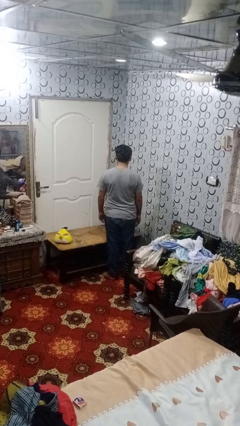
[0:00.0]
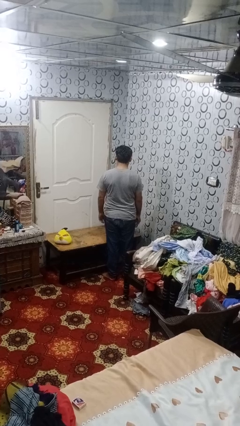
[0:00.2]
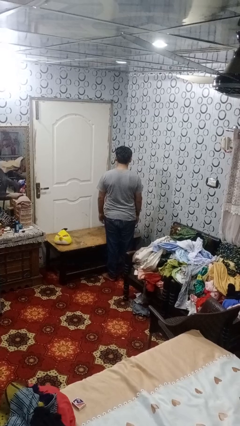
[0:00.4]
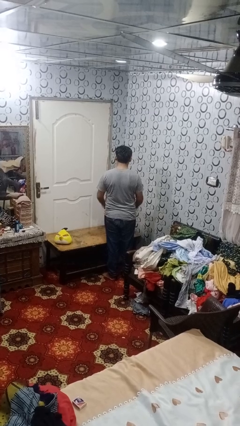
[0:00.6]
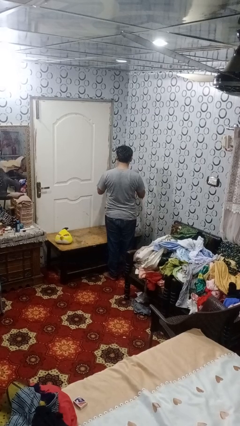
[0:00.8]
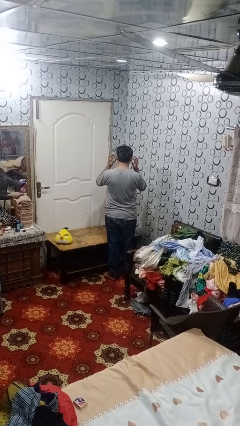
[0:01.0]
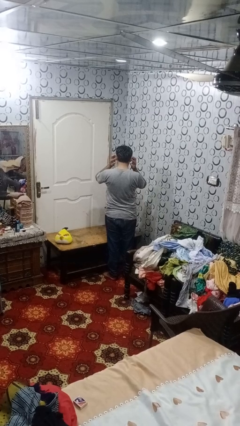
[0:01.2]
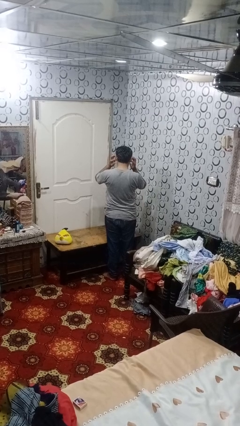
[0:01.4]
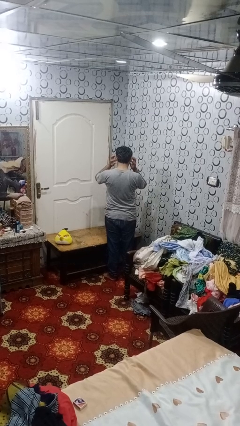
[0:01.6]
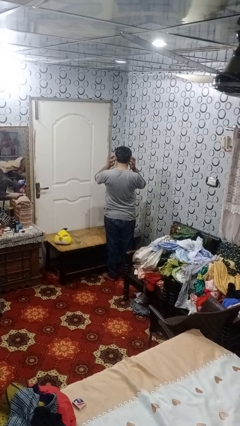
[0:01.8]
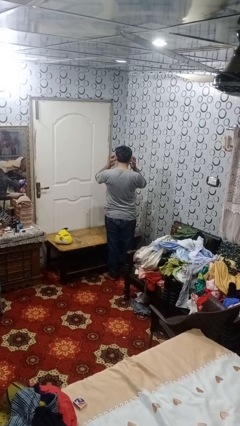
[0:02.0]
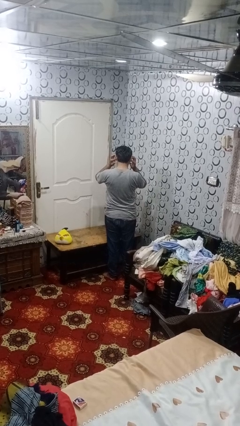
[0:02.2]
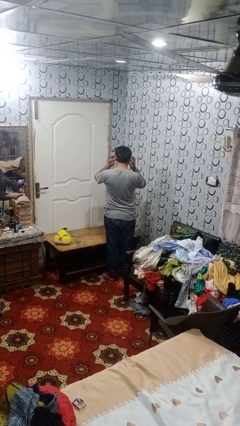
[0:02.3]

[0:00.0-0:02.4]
person puts fingers in ear

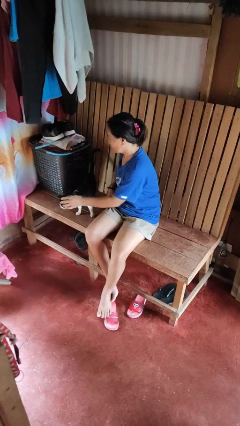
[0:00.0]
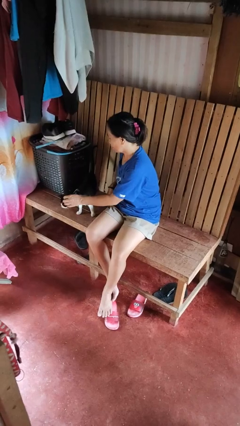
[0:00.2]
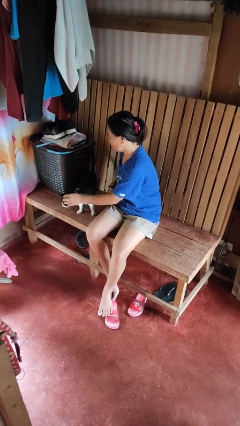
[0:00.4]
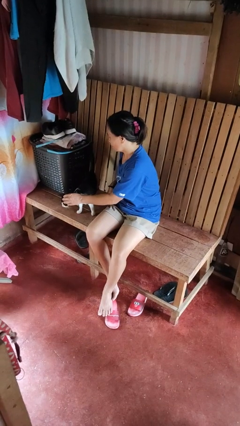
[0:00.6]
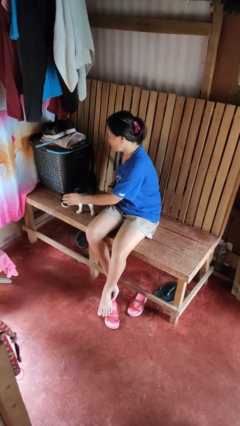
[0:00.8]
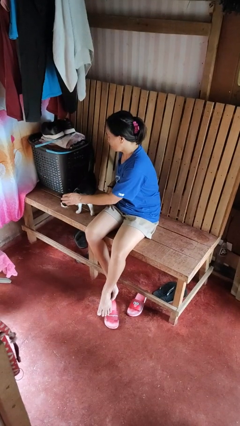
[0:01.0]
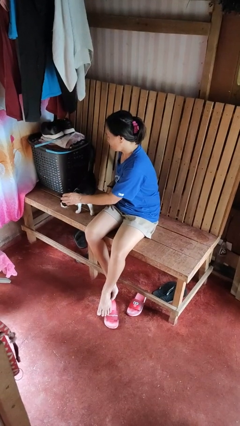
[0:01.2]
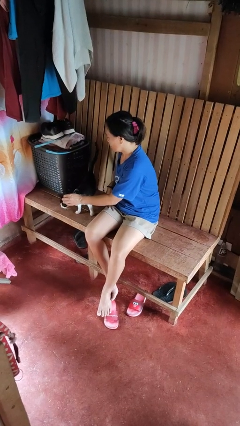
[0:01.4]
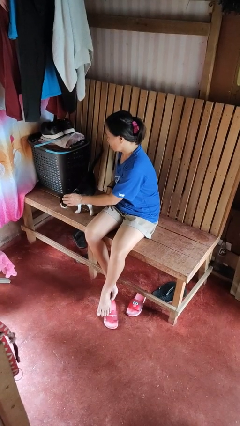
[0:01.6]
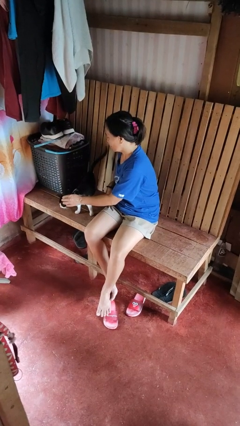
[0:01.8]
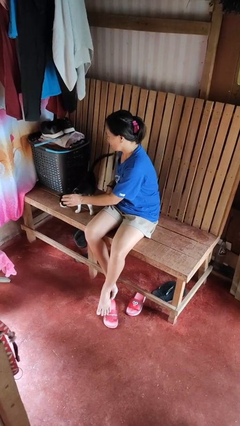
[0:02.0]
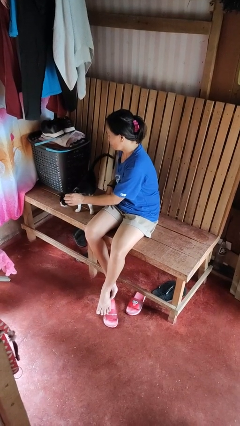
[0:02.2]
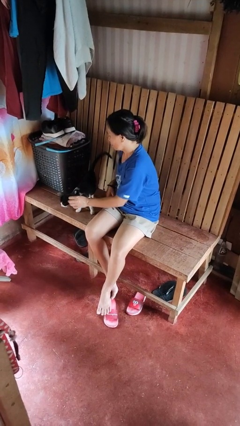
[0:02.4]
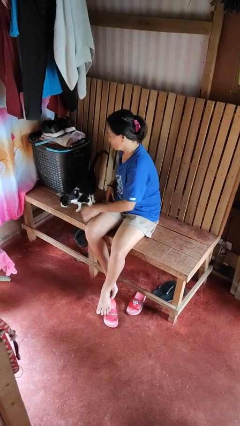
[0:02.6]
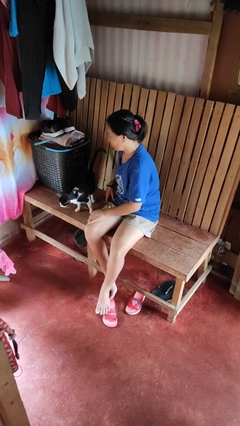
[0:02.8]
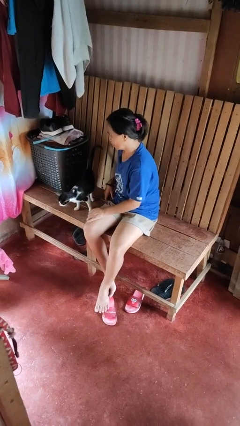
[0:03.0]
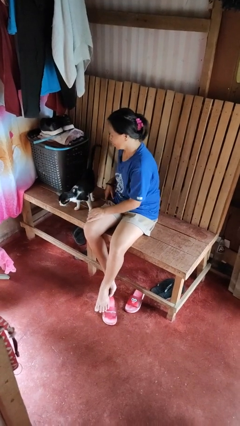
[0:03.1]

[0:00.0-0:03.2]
person pets cat

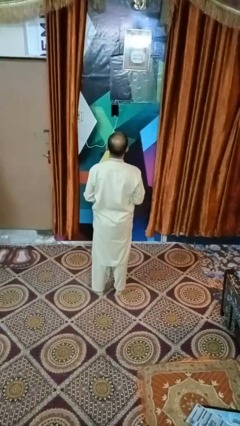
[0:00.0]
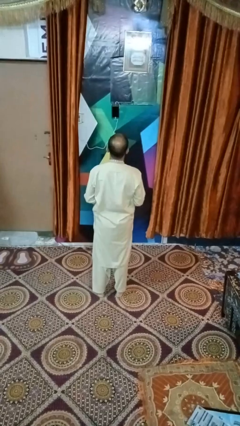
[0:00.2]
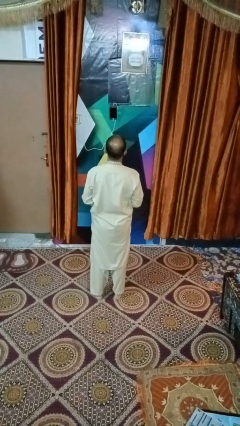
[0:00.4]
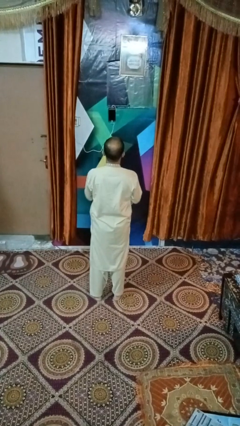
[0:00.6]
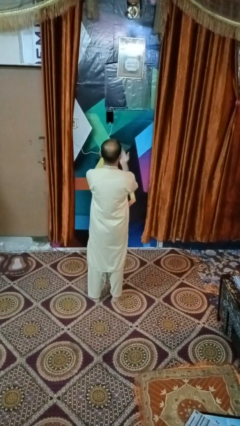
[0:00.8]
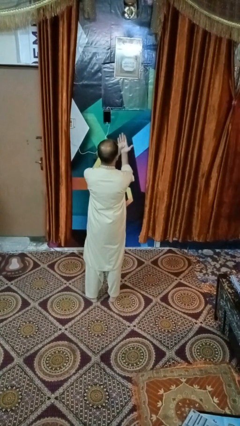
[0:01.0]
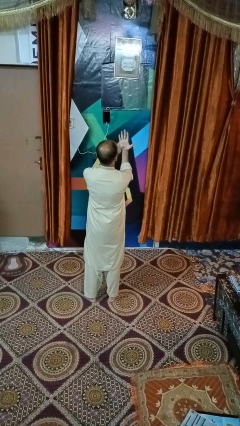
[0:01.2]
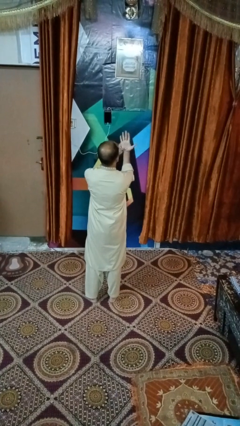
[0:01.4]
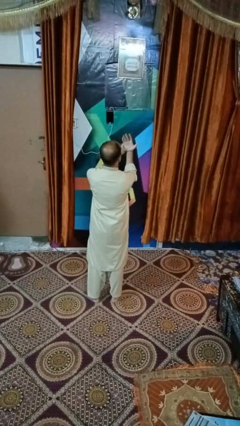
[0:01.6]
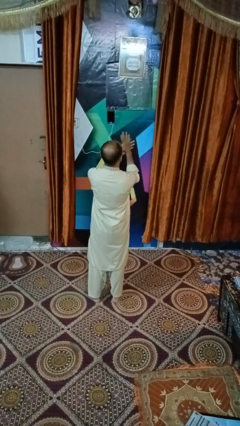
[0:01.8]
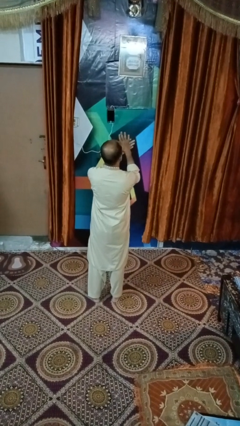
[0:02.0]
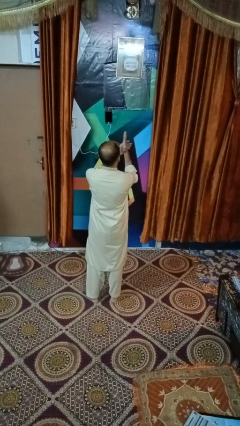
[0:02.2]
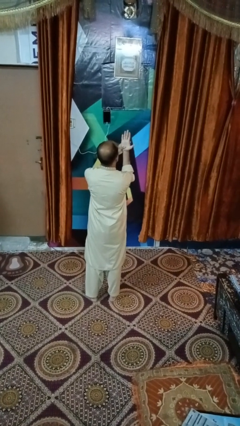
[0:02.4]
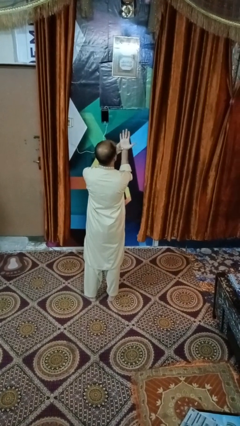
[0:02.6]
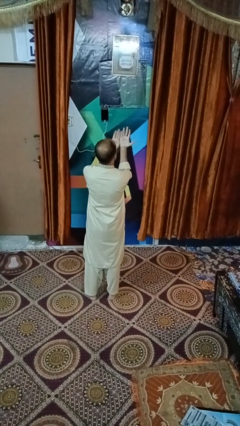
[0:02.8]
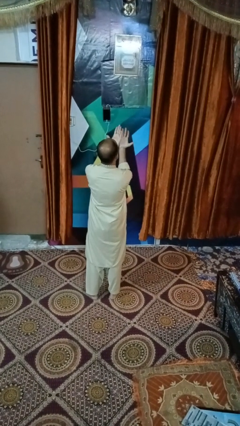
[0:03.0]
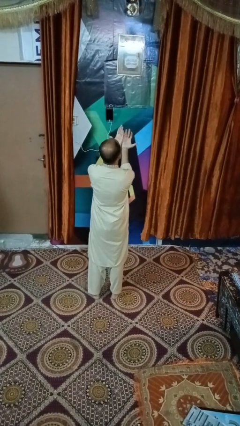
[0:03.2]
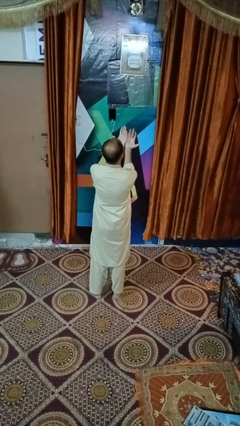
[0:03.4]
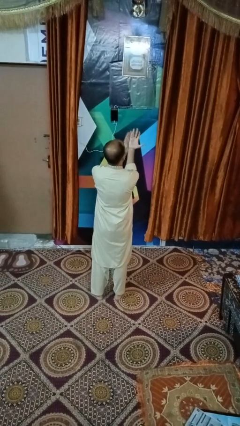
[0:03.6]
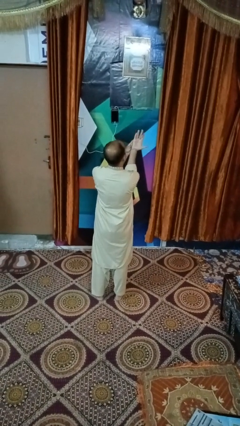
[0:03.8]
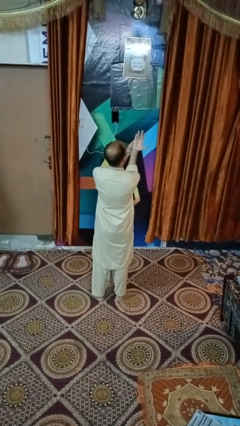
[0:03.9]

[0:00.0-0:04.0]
person looks at hands in lap

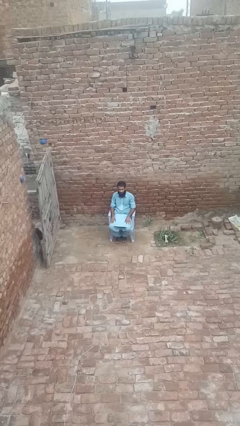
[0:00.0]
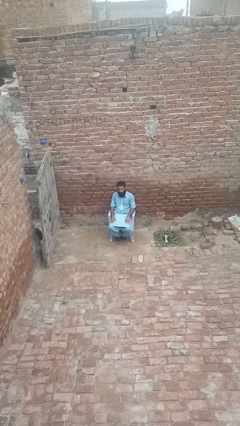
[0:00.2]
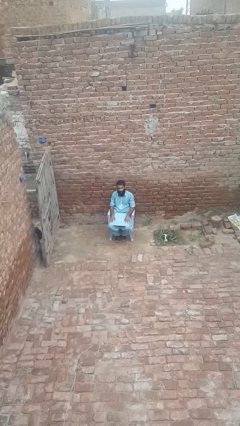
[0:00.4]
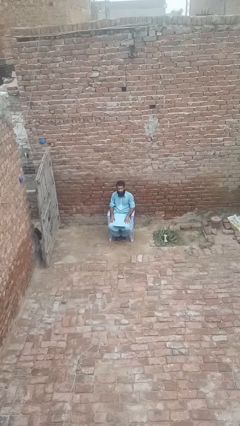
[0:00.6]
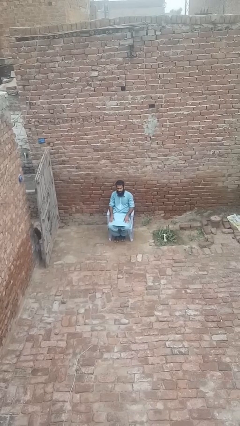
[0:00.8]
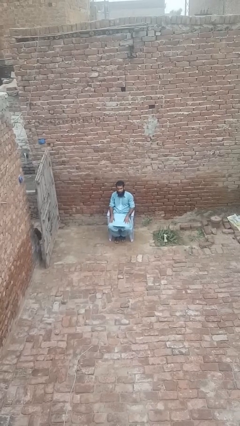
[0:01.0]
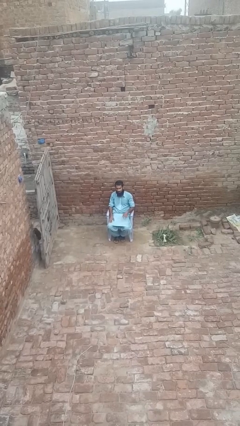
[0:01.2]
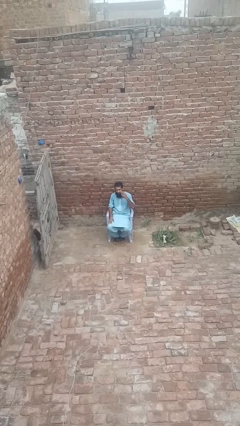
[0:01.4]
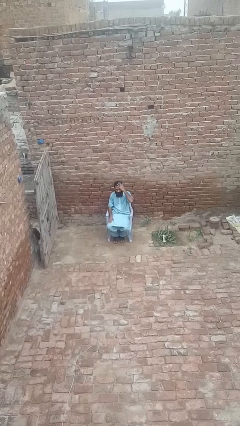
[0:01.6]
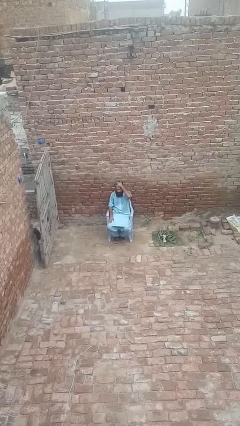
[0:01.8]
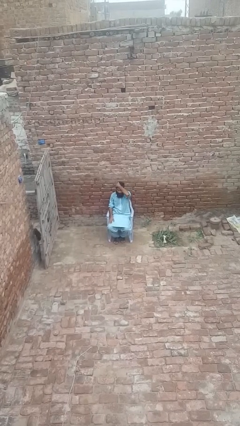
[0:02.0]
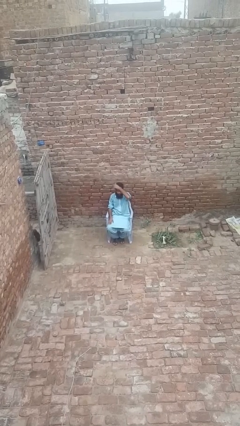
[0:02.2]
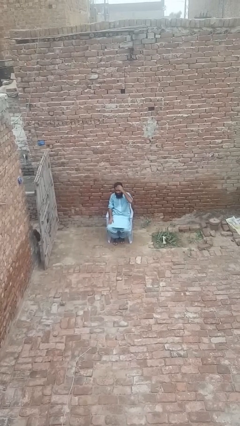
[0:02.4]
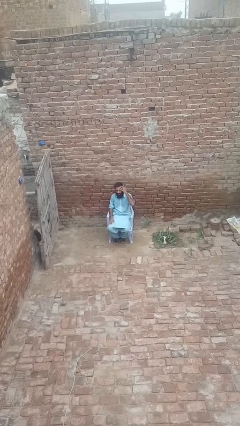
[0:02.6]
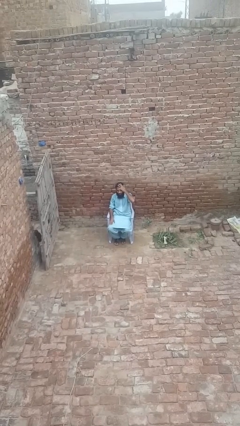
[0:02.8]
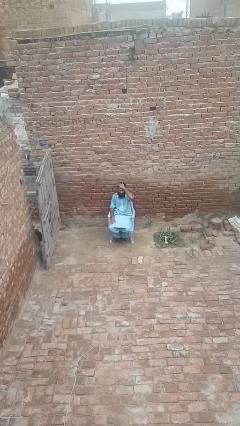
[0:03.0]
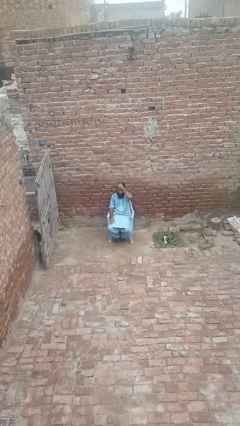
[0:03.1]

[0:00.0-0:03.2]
person strokes hair

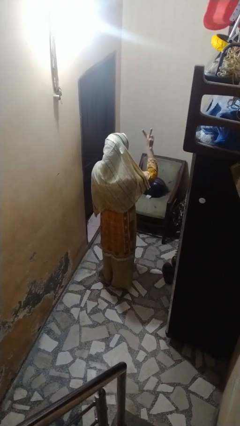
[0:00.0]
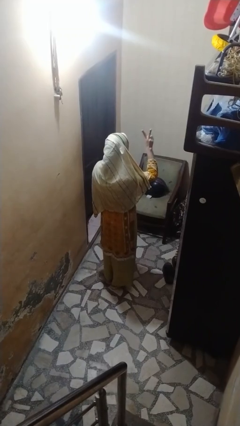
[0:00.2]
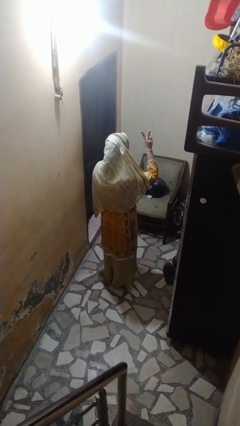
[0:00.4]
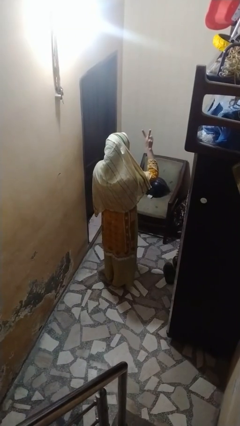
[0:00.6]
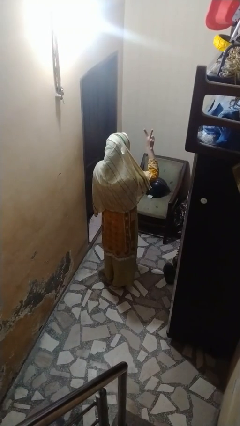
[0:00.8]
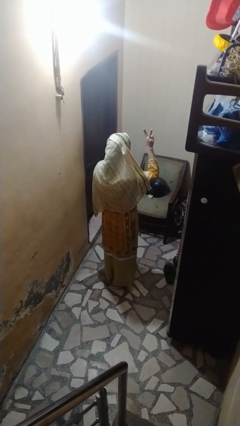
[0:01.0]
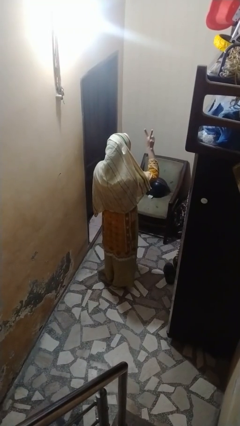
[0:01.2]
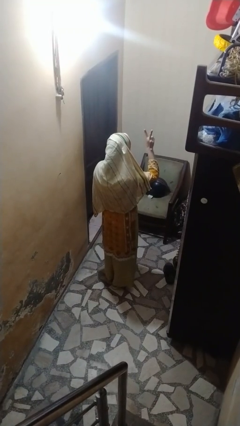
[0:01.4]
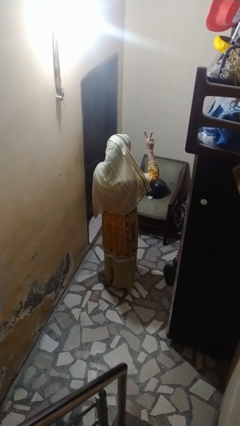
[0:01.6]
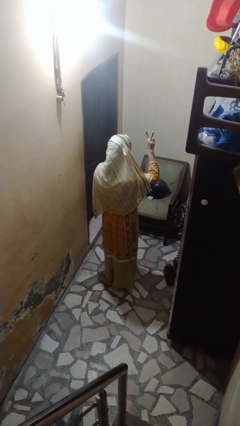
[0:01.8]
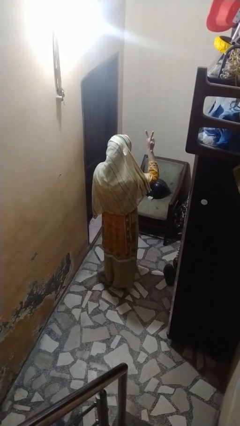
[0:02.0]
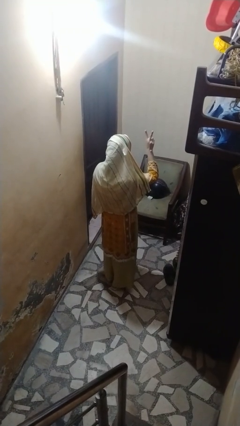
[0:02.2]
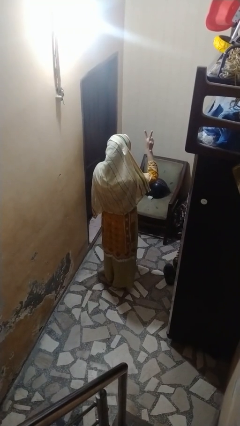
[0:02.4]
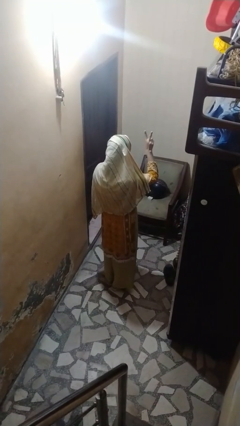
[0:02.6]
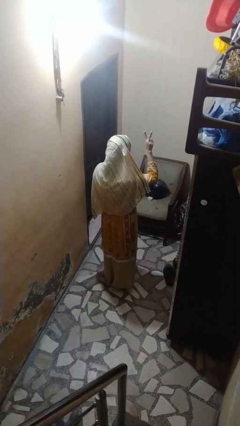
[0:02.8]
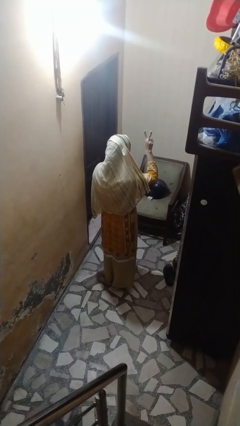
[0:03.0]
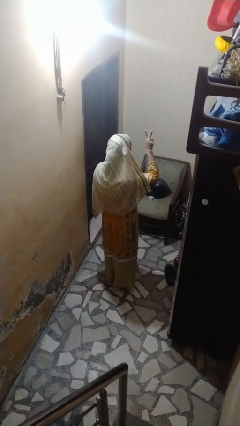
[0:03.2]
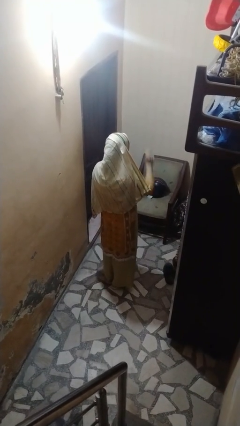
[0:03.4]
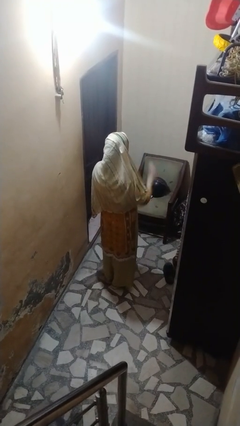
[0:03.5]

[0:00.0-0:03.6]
person gestures peace

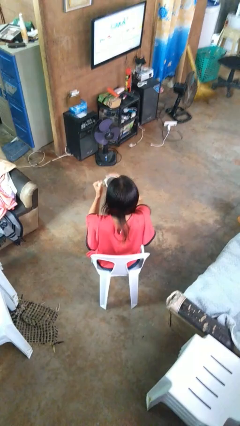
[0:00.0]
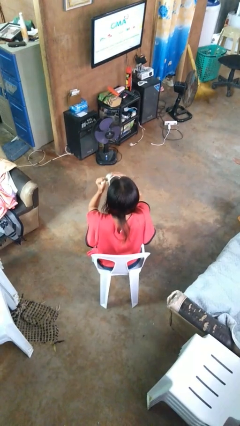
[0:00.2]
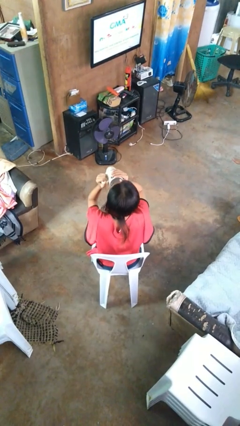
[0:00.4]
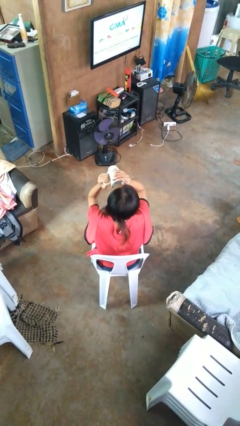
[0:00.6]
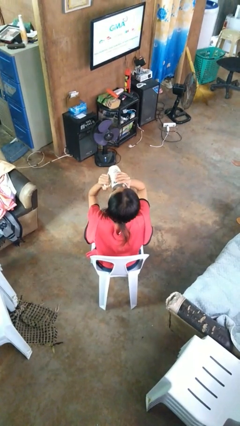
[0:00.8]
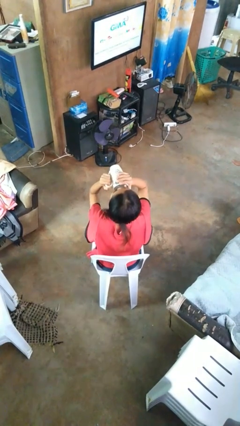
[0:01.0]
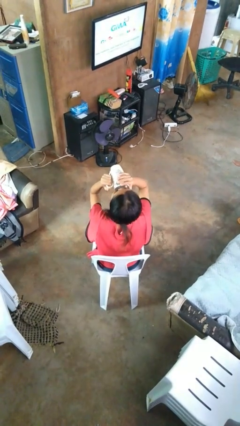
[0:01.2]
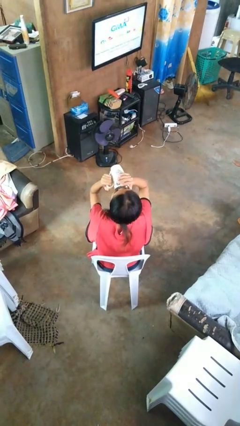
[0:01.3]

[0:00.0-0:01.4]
person drinks from mug
